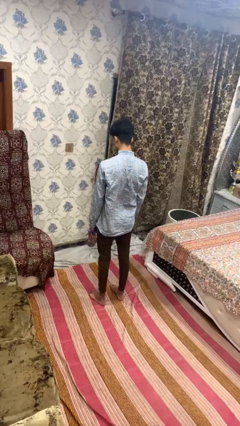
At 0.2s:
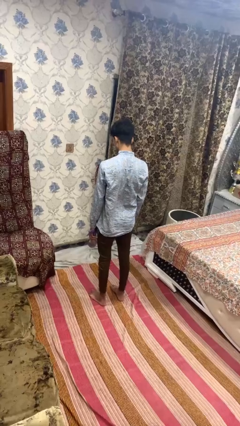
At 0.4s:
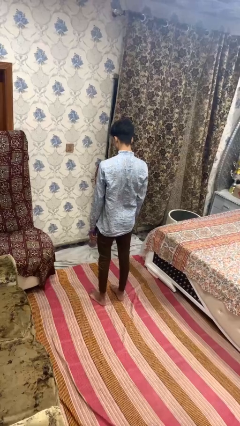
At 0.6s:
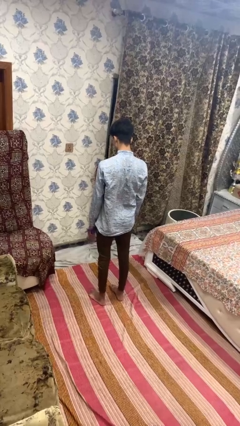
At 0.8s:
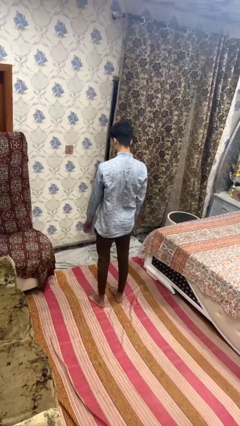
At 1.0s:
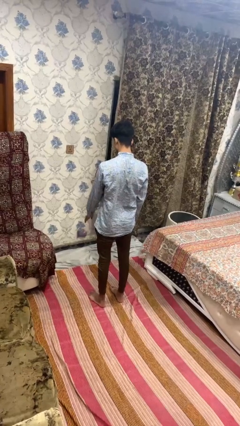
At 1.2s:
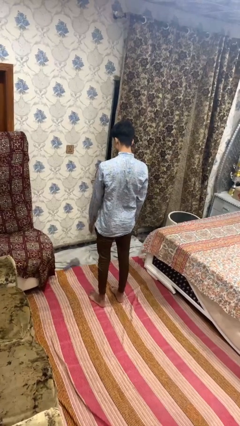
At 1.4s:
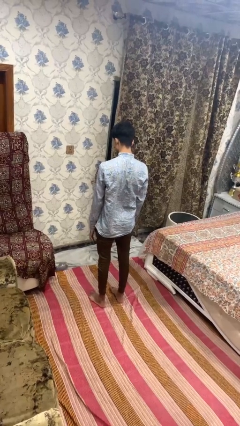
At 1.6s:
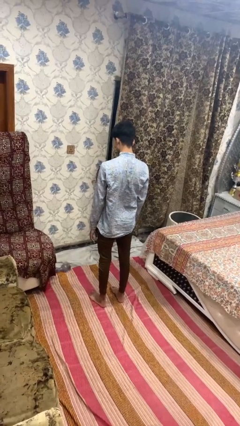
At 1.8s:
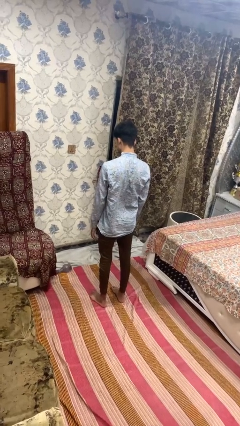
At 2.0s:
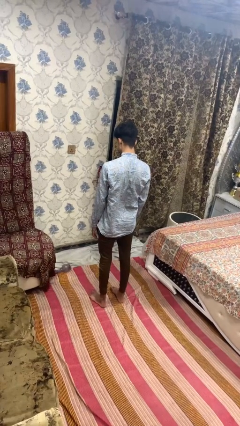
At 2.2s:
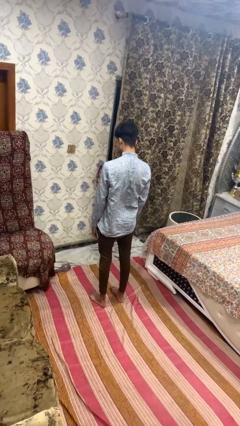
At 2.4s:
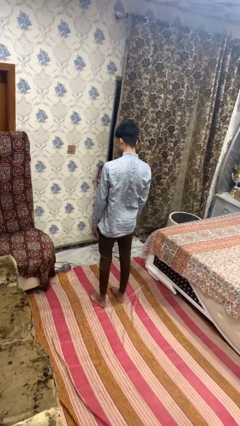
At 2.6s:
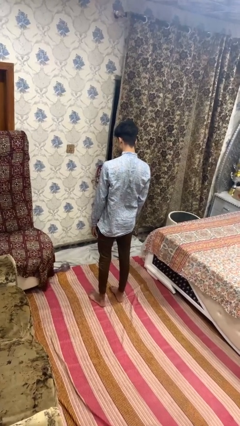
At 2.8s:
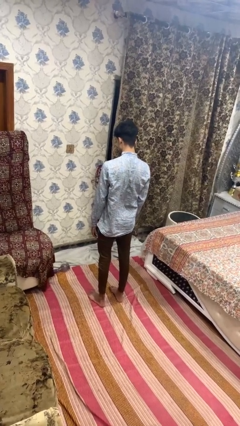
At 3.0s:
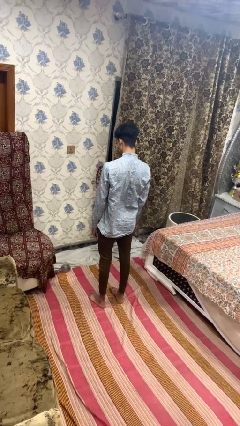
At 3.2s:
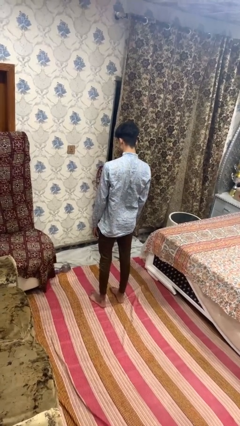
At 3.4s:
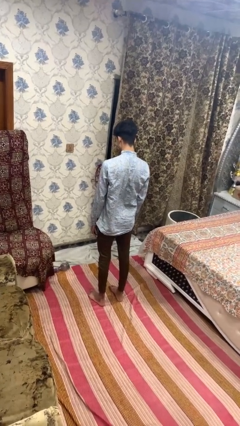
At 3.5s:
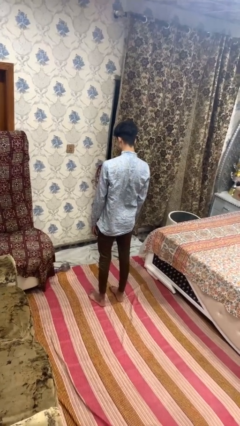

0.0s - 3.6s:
person throws object to ground

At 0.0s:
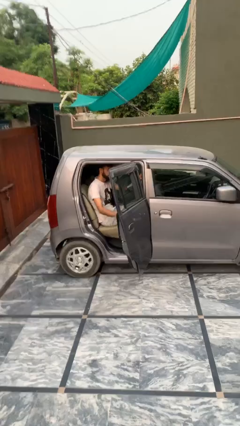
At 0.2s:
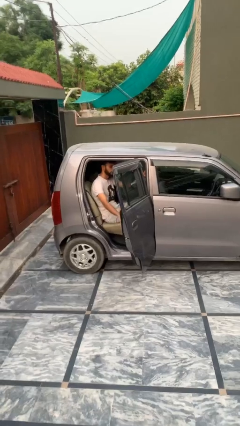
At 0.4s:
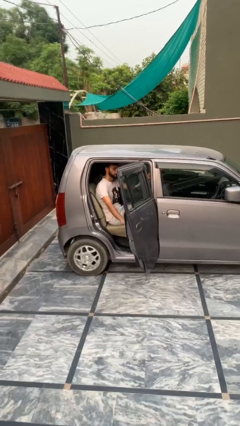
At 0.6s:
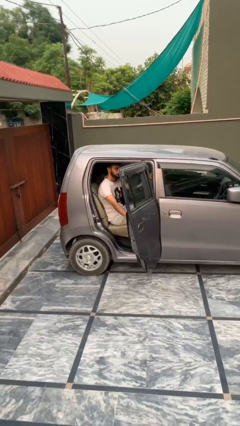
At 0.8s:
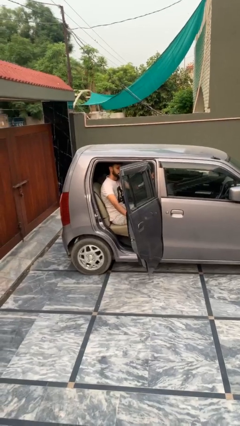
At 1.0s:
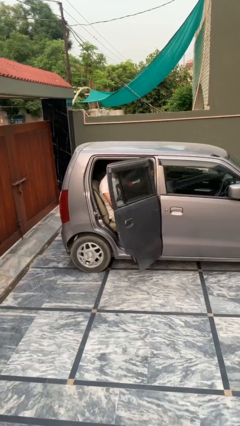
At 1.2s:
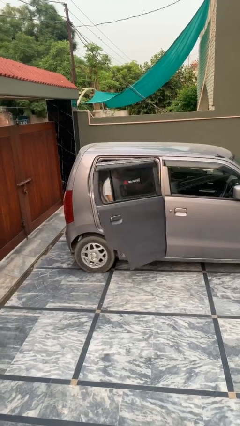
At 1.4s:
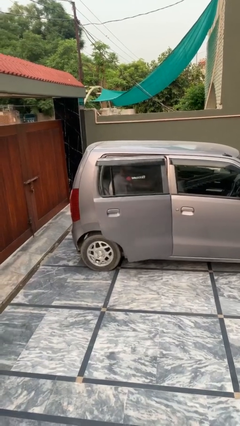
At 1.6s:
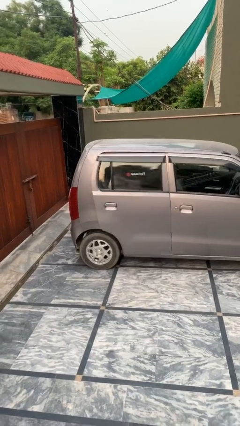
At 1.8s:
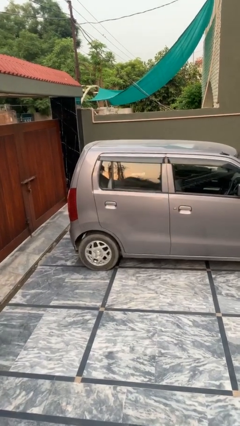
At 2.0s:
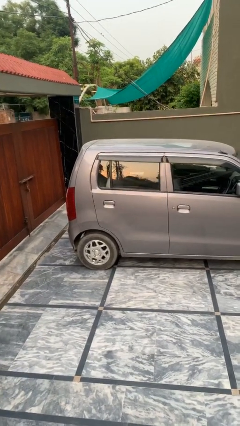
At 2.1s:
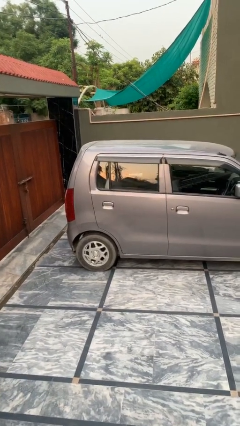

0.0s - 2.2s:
person closes car door

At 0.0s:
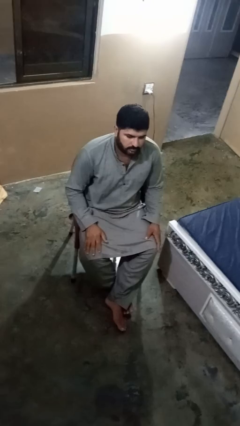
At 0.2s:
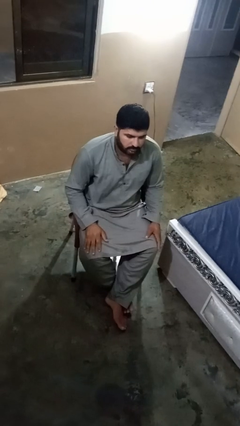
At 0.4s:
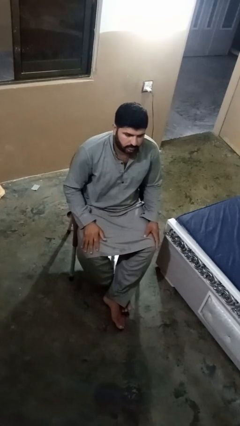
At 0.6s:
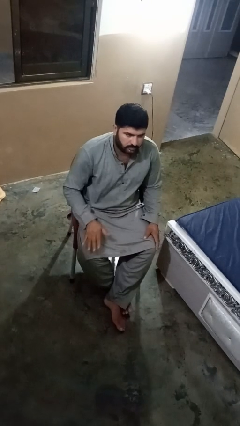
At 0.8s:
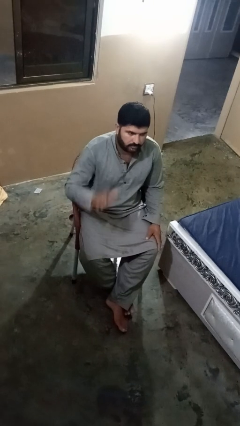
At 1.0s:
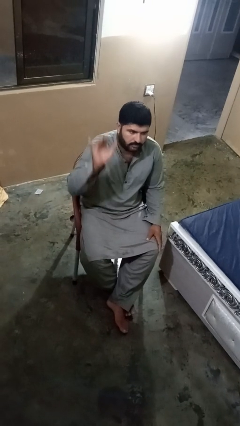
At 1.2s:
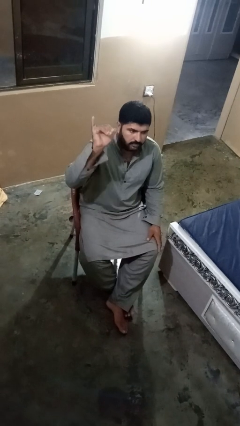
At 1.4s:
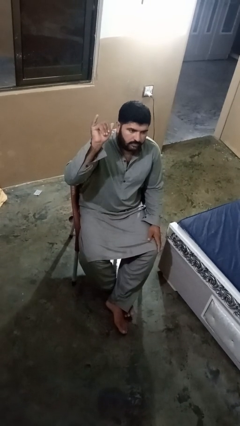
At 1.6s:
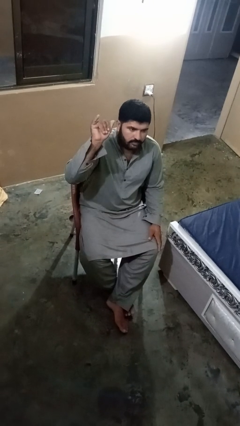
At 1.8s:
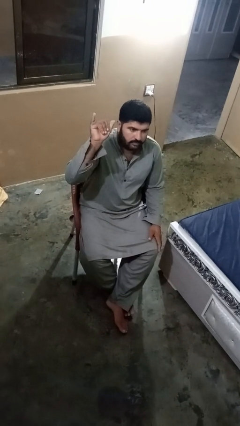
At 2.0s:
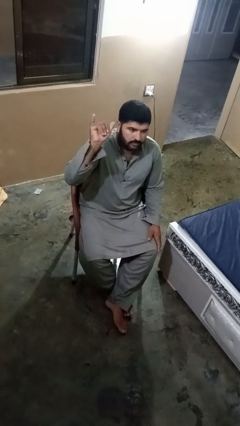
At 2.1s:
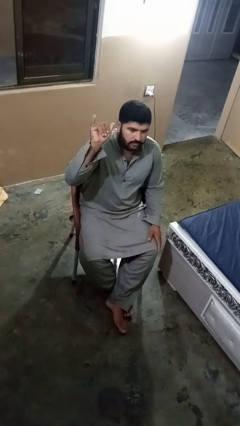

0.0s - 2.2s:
person gestures hang loose

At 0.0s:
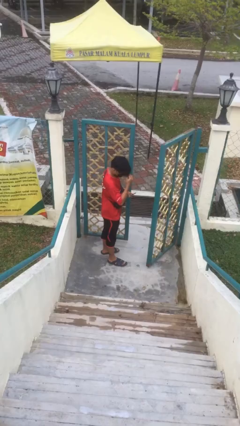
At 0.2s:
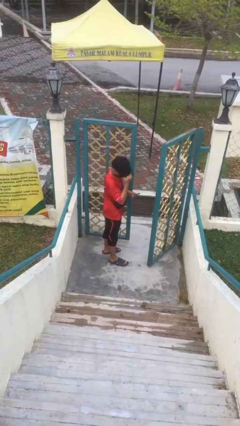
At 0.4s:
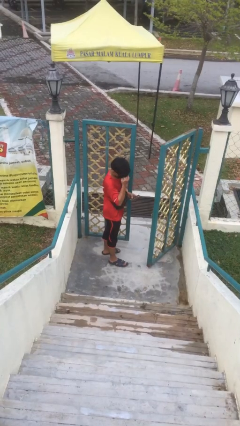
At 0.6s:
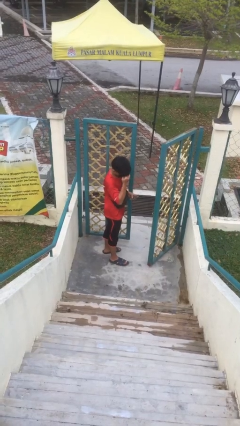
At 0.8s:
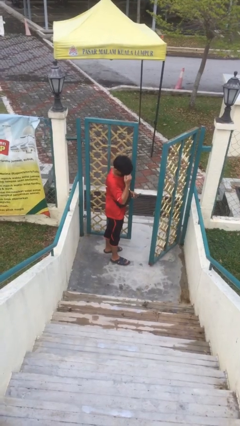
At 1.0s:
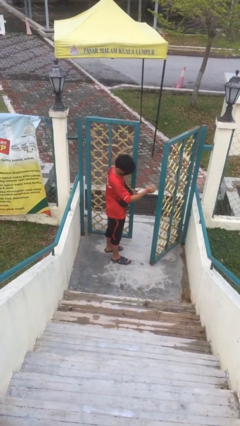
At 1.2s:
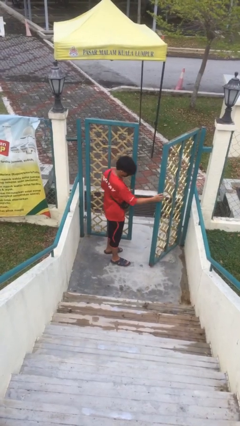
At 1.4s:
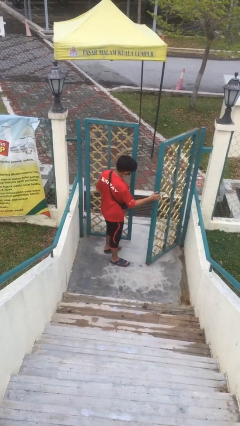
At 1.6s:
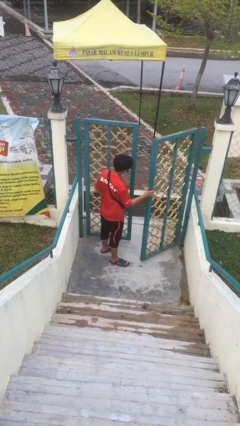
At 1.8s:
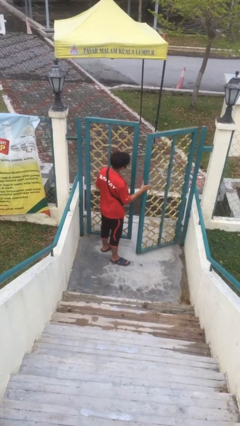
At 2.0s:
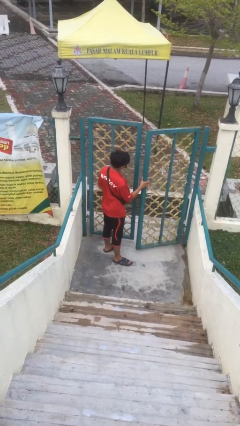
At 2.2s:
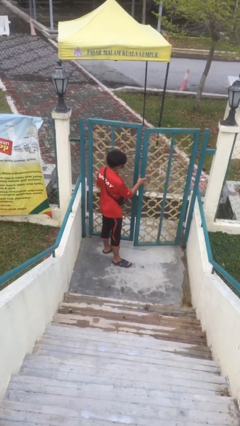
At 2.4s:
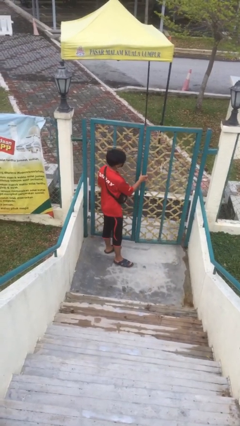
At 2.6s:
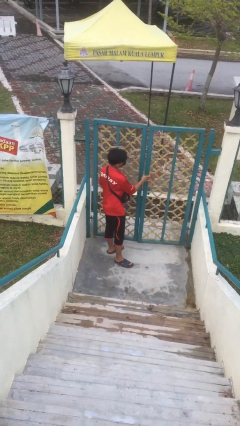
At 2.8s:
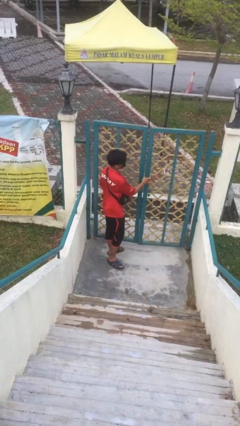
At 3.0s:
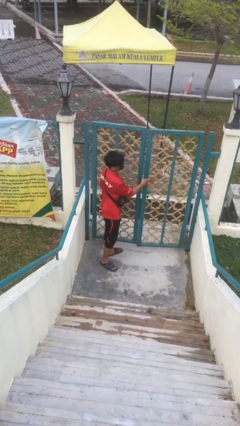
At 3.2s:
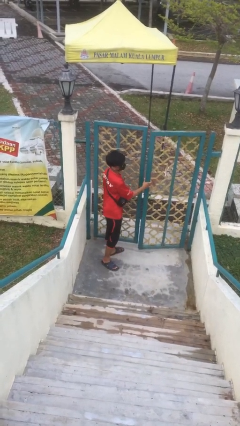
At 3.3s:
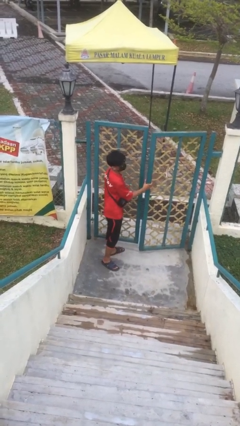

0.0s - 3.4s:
person closes facility door

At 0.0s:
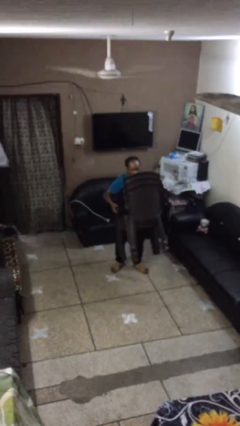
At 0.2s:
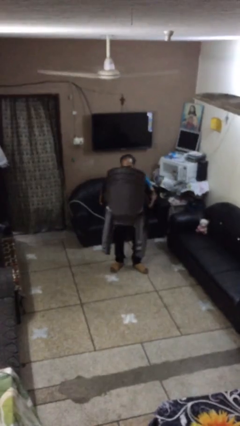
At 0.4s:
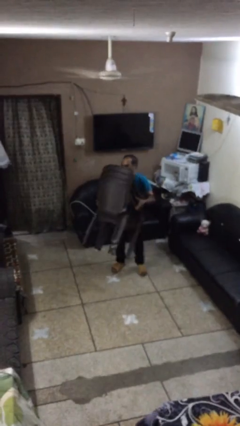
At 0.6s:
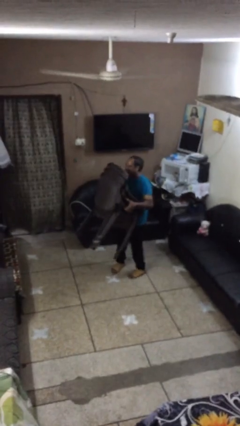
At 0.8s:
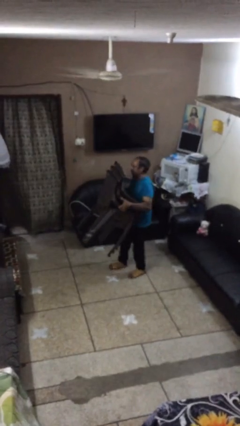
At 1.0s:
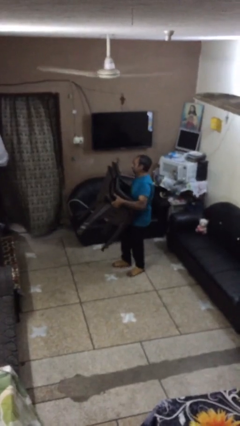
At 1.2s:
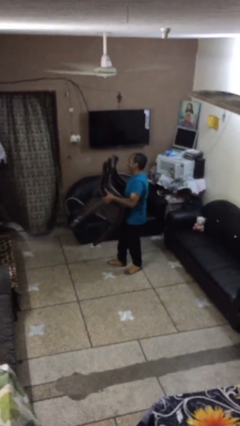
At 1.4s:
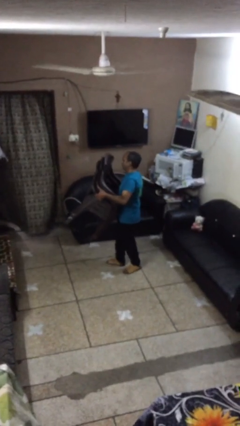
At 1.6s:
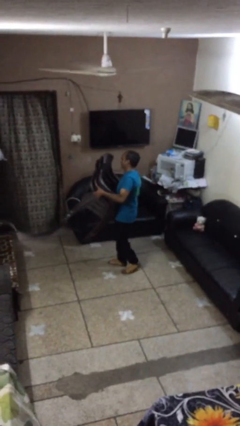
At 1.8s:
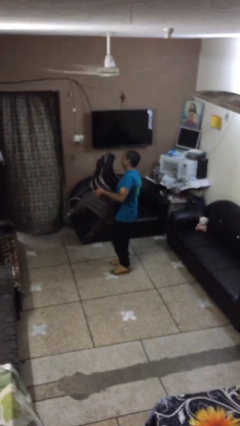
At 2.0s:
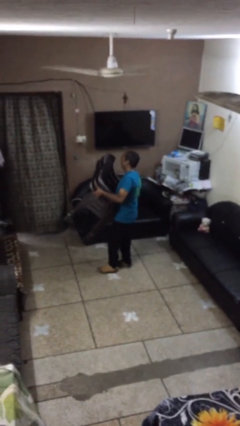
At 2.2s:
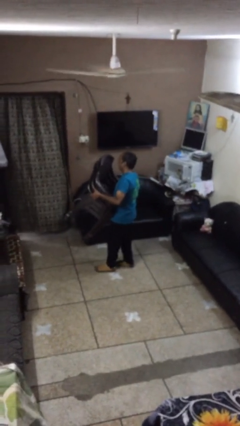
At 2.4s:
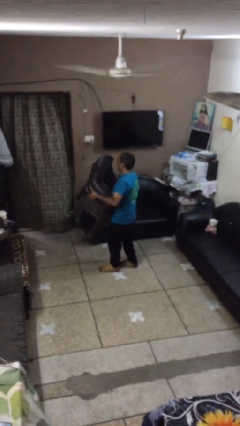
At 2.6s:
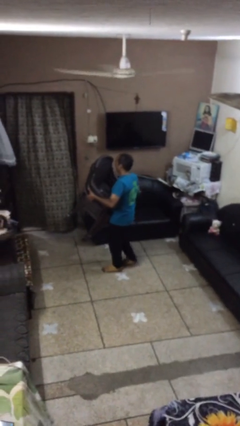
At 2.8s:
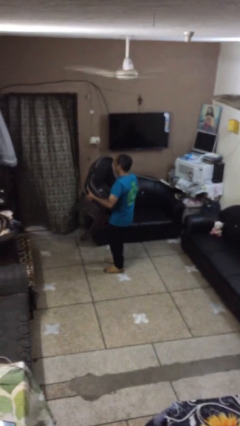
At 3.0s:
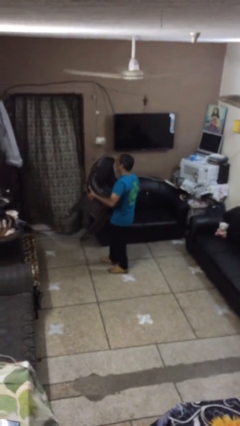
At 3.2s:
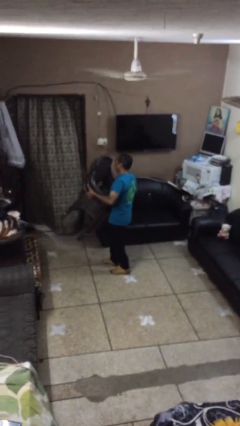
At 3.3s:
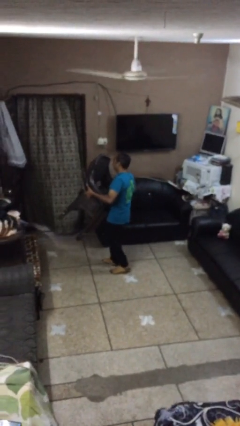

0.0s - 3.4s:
person carries heavy object

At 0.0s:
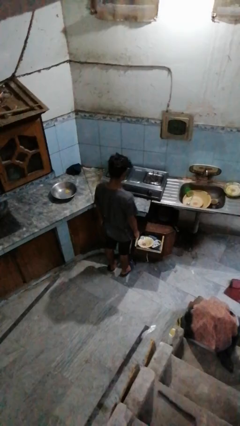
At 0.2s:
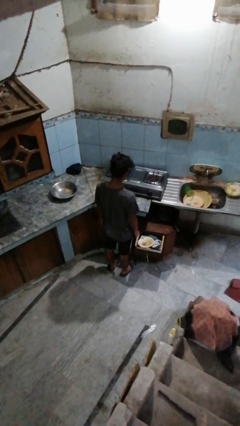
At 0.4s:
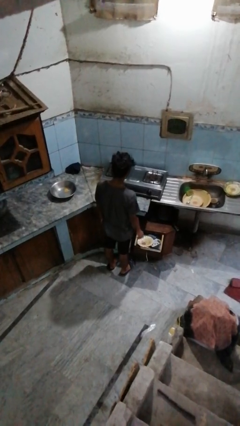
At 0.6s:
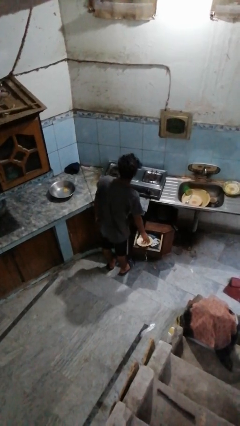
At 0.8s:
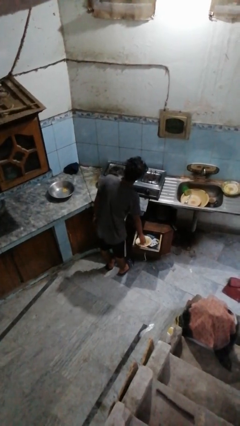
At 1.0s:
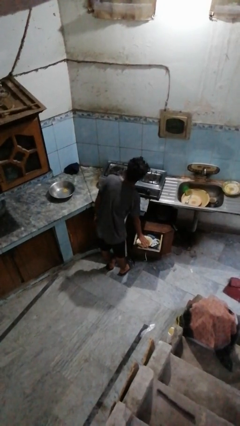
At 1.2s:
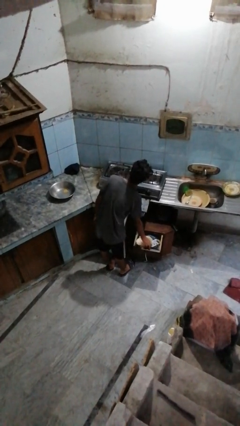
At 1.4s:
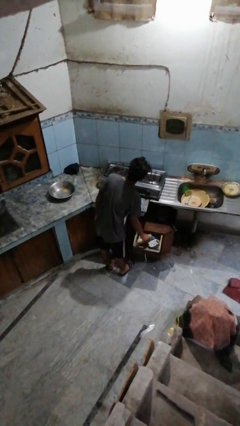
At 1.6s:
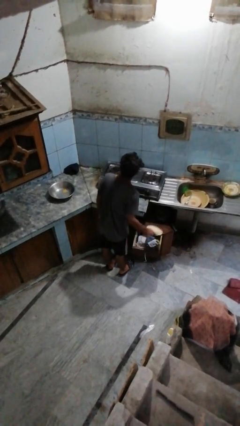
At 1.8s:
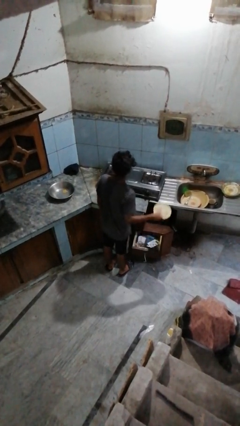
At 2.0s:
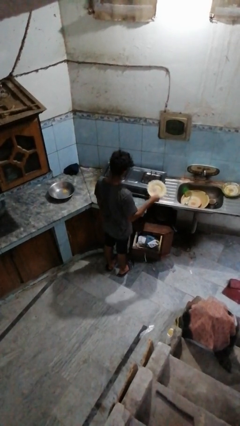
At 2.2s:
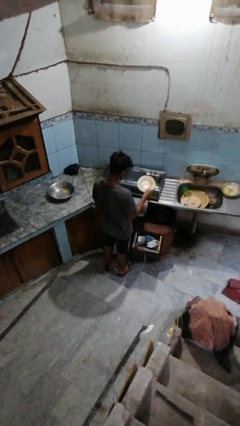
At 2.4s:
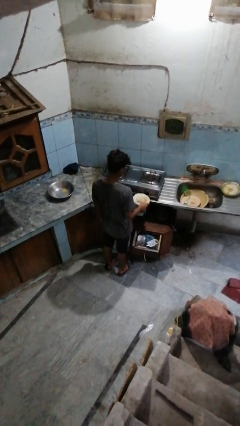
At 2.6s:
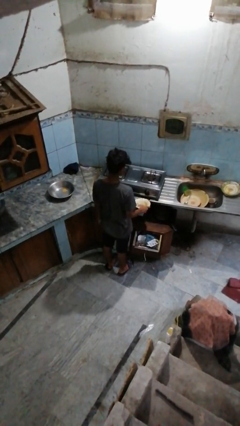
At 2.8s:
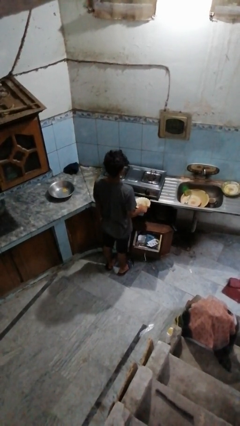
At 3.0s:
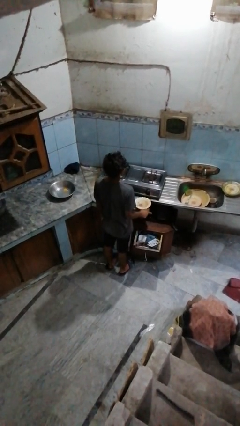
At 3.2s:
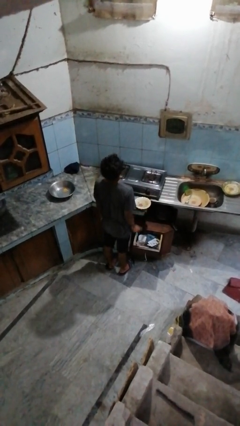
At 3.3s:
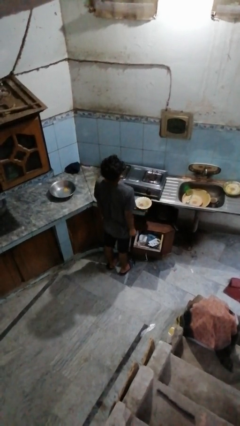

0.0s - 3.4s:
person takes object from kitchen drawer
